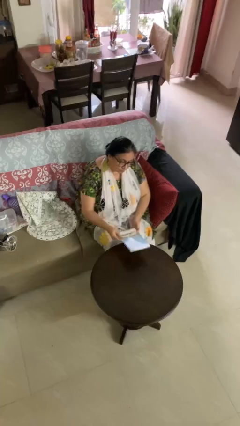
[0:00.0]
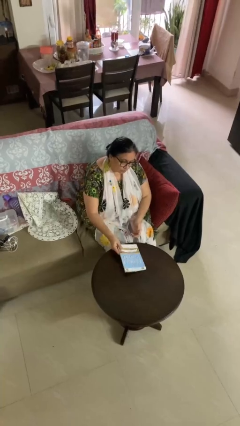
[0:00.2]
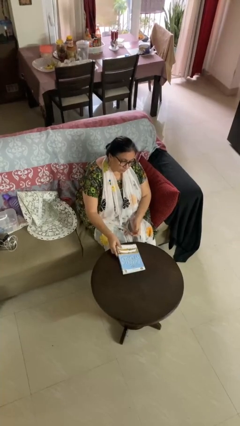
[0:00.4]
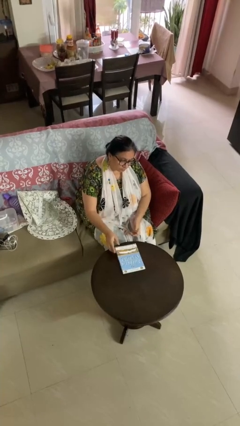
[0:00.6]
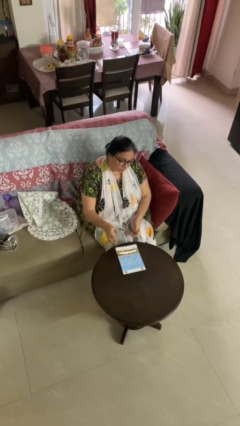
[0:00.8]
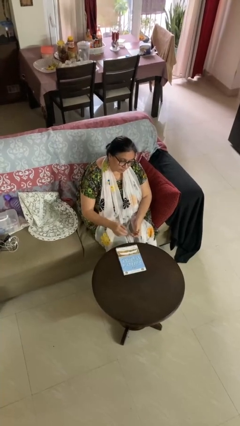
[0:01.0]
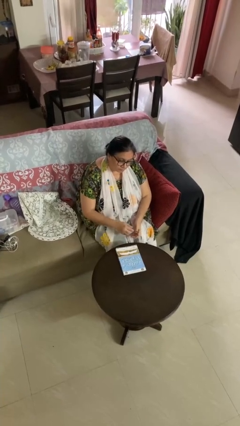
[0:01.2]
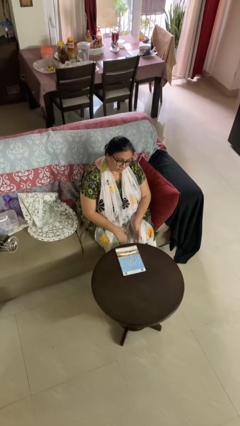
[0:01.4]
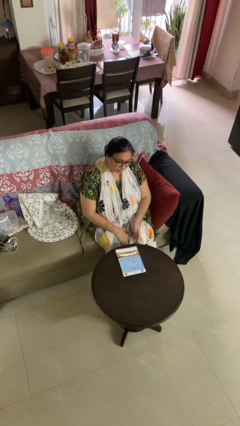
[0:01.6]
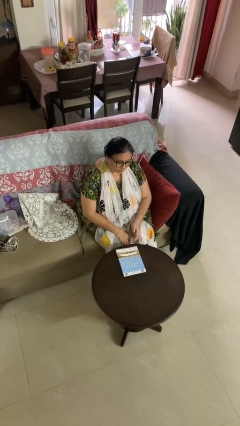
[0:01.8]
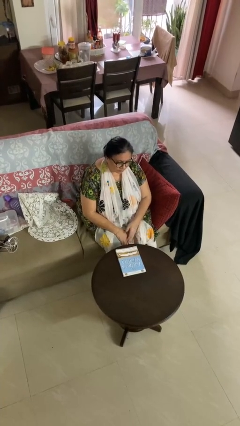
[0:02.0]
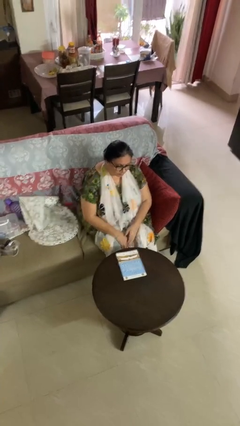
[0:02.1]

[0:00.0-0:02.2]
person puts down object on table

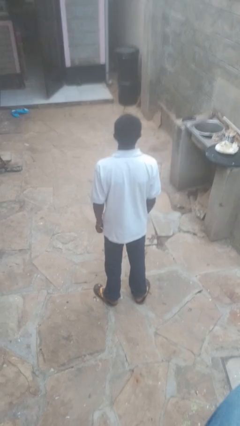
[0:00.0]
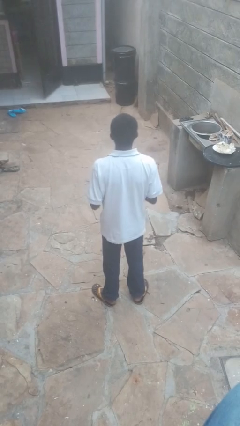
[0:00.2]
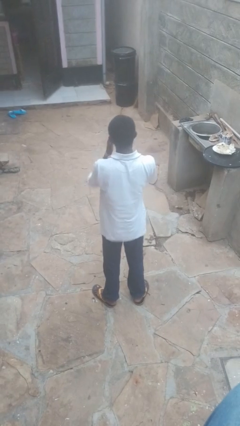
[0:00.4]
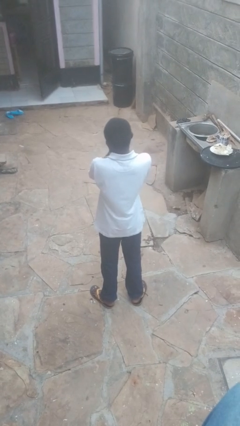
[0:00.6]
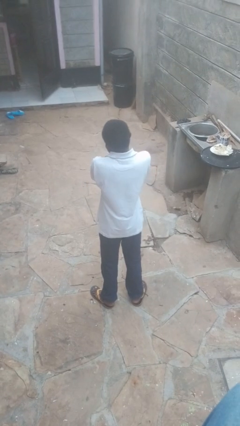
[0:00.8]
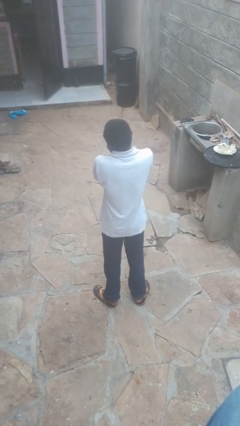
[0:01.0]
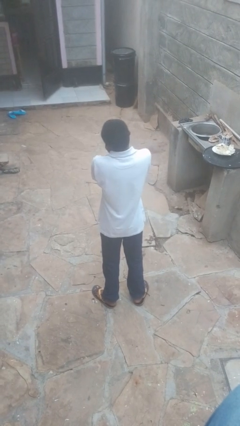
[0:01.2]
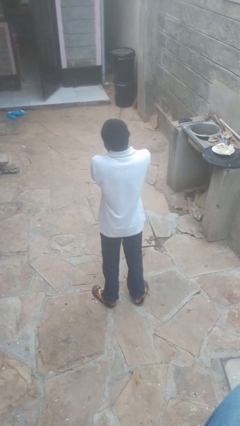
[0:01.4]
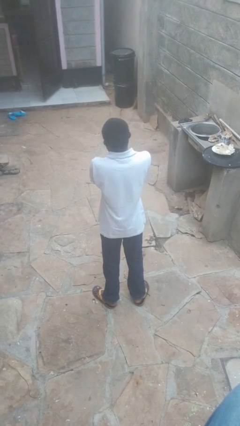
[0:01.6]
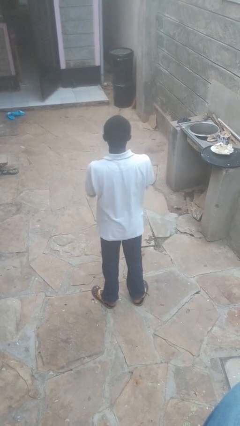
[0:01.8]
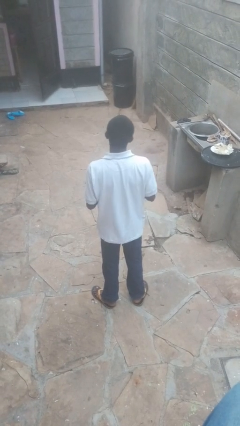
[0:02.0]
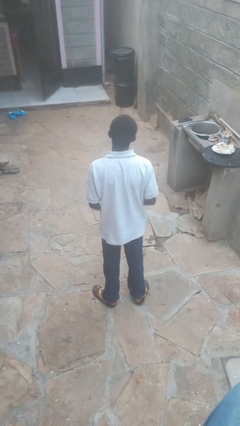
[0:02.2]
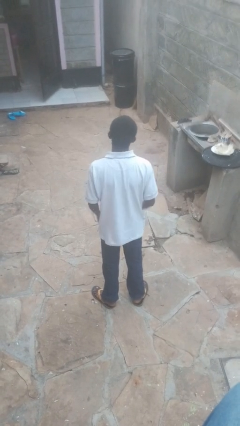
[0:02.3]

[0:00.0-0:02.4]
person covers face with hands

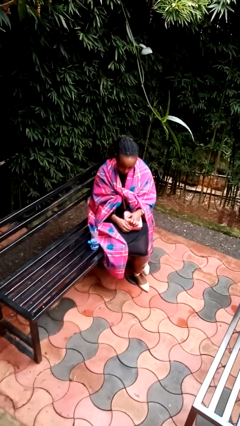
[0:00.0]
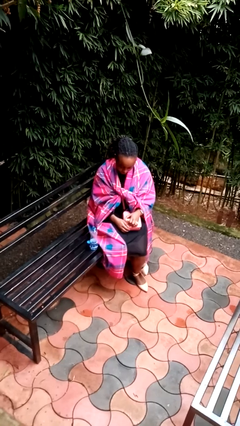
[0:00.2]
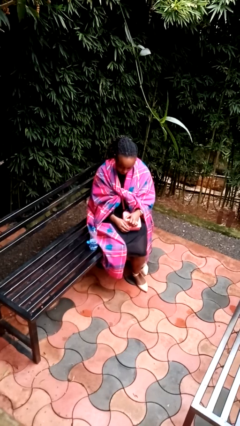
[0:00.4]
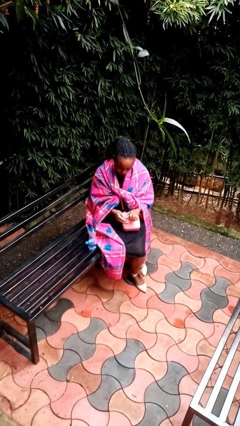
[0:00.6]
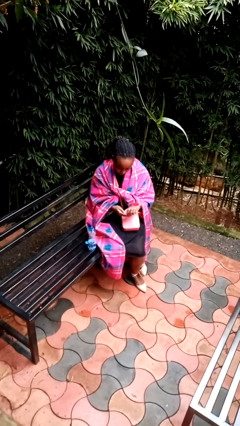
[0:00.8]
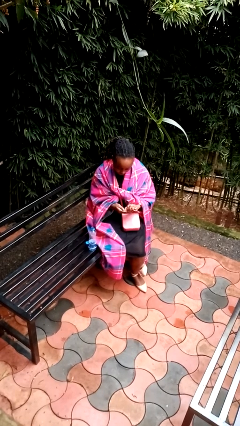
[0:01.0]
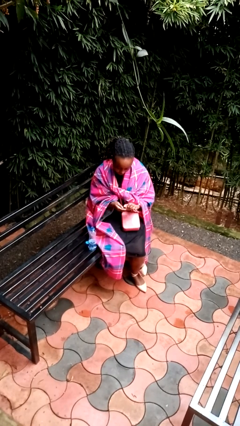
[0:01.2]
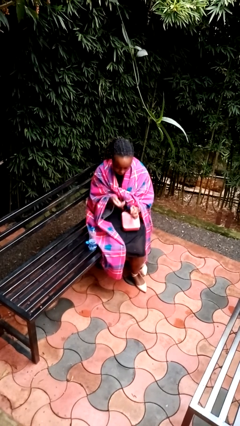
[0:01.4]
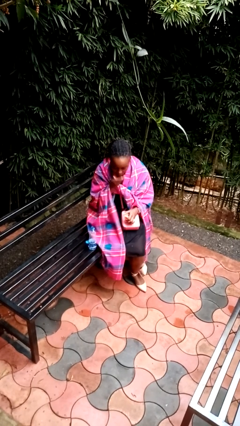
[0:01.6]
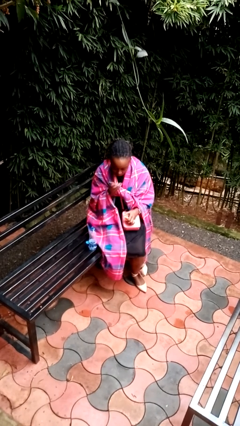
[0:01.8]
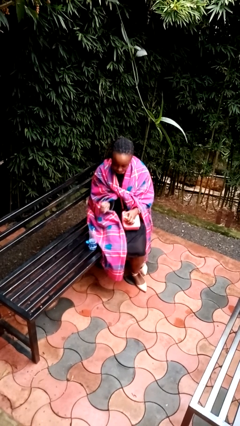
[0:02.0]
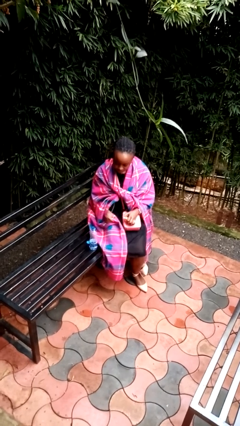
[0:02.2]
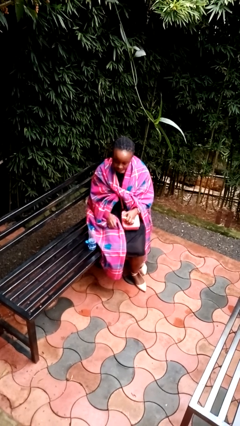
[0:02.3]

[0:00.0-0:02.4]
person takes medicine pills

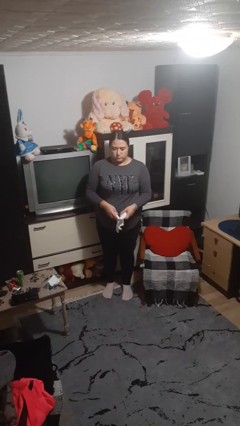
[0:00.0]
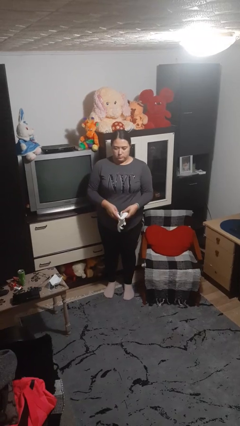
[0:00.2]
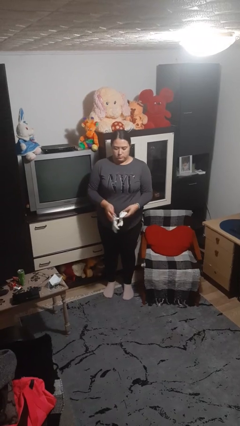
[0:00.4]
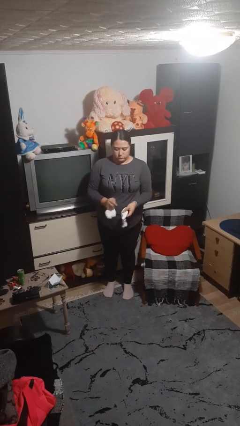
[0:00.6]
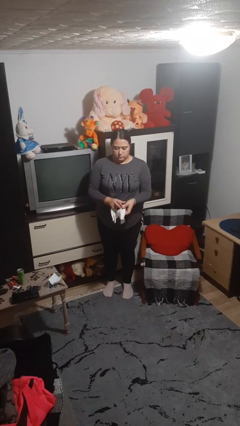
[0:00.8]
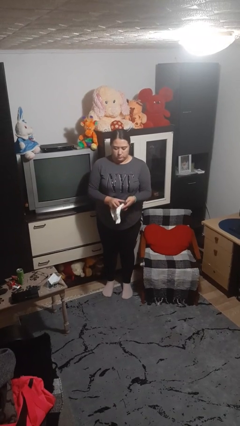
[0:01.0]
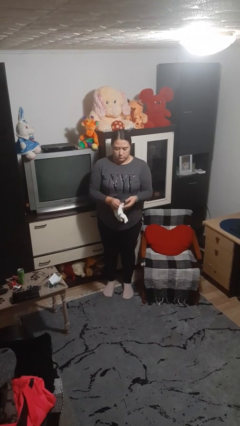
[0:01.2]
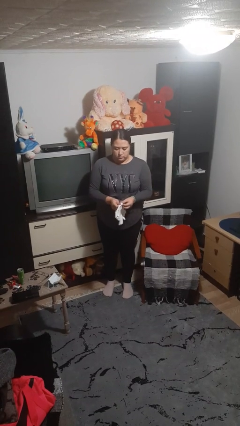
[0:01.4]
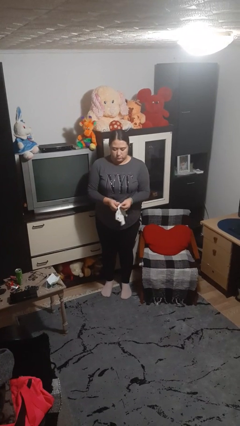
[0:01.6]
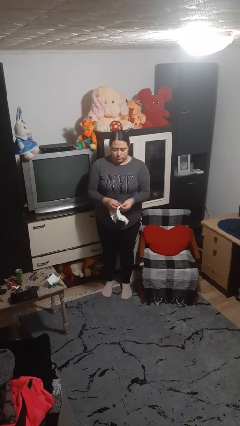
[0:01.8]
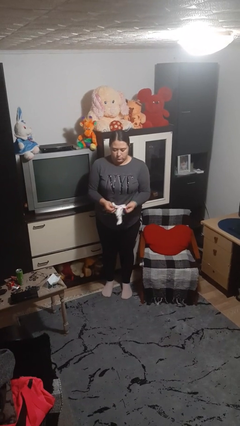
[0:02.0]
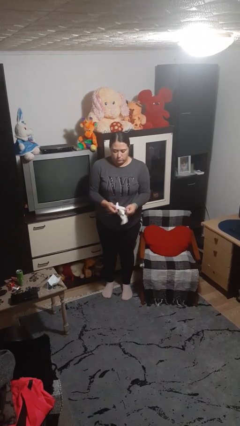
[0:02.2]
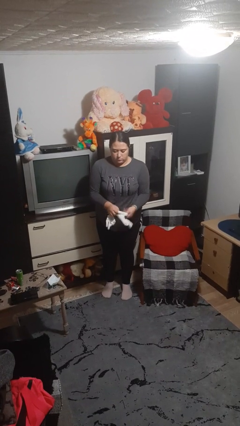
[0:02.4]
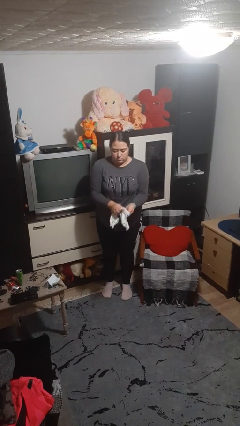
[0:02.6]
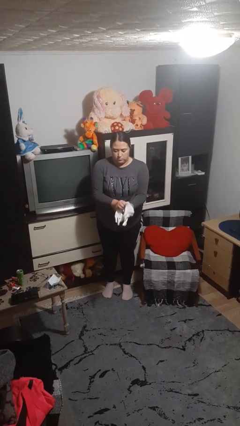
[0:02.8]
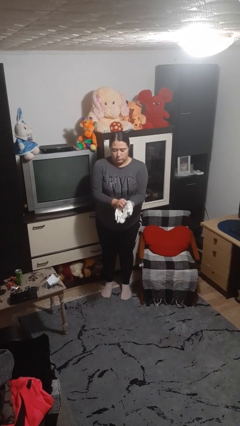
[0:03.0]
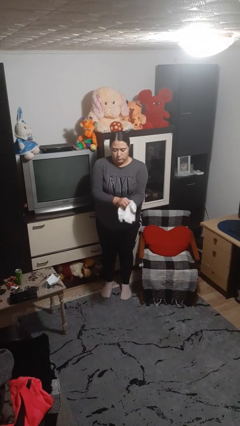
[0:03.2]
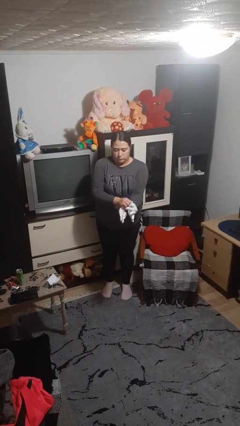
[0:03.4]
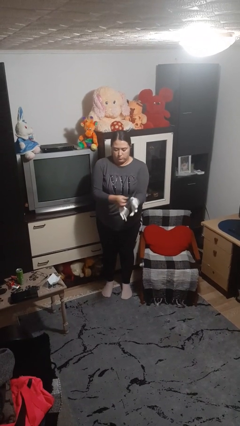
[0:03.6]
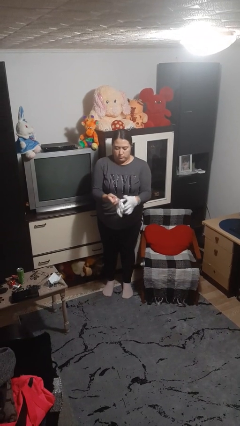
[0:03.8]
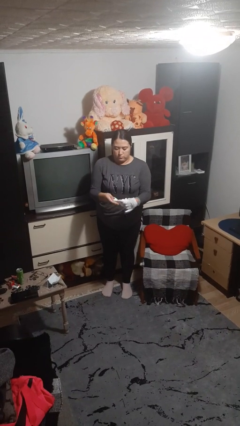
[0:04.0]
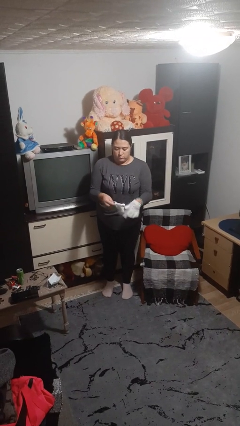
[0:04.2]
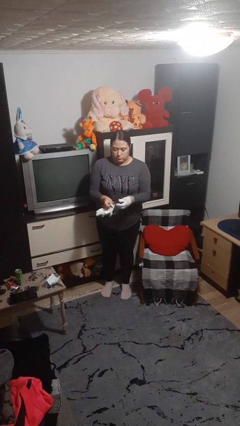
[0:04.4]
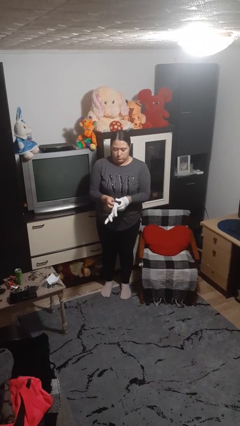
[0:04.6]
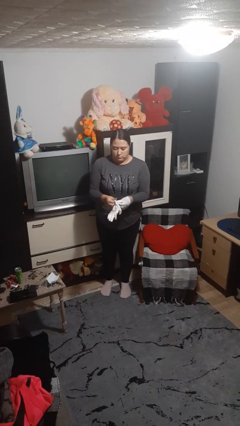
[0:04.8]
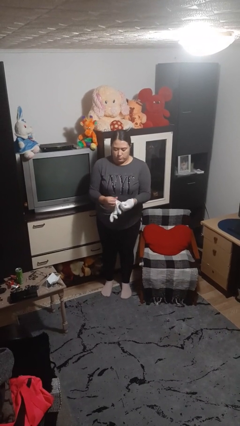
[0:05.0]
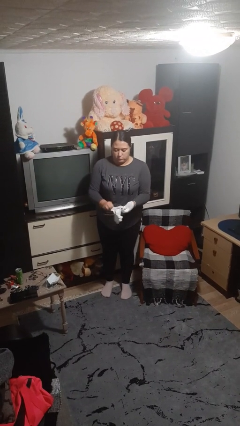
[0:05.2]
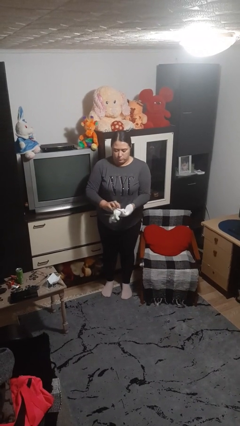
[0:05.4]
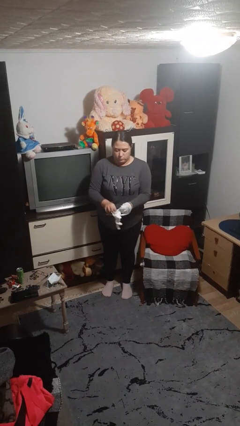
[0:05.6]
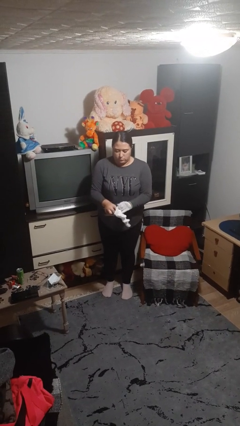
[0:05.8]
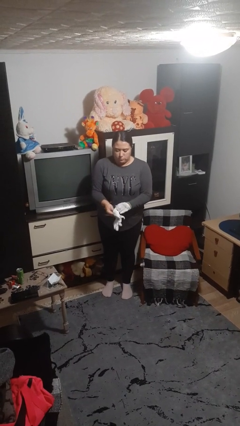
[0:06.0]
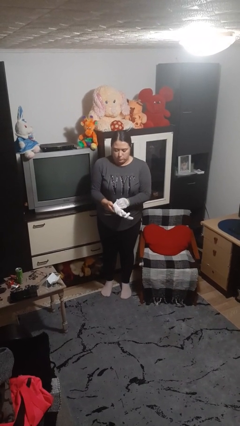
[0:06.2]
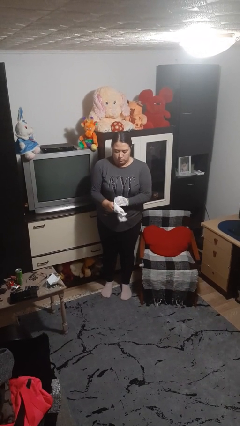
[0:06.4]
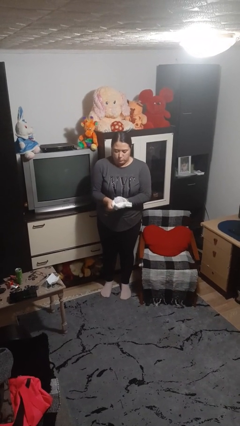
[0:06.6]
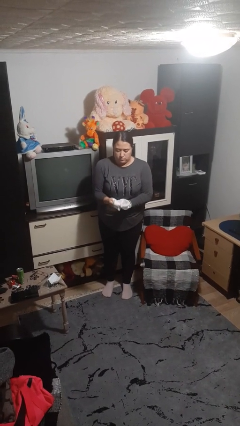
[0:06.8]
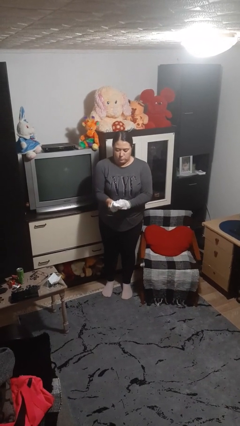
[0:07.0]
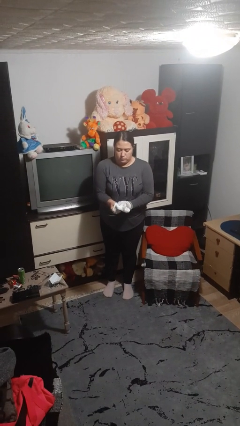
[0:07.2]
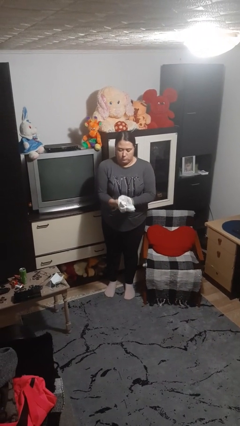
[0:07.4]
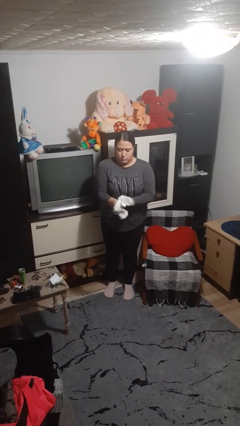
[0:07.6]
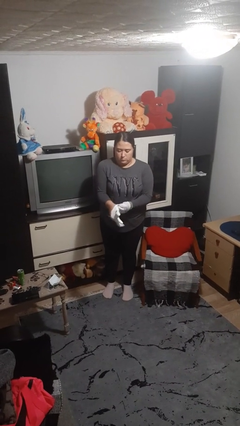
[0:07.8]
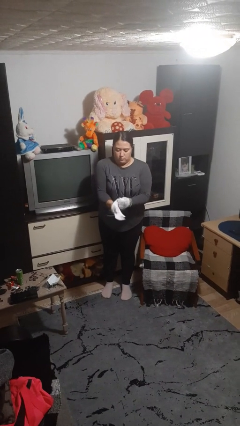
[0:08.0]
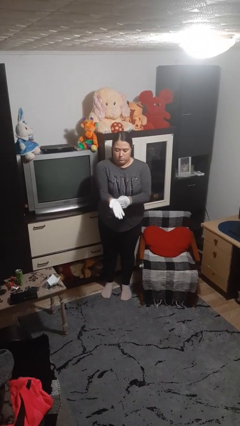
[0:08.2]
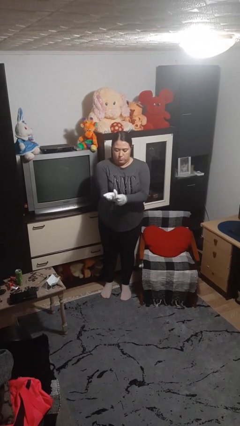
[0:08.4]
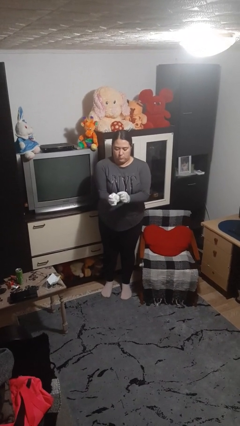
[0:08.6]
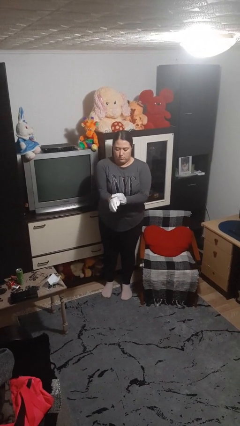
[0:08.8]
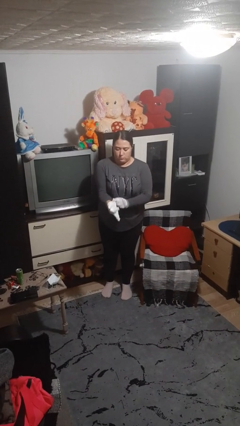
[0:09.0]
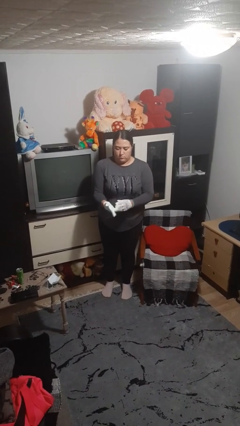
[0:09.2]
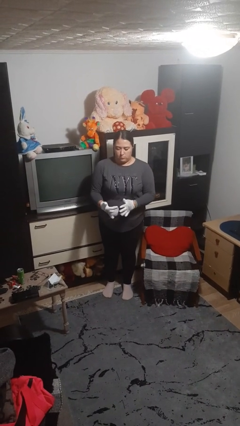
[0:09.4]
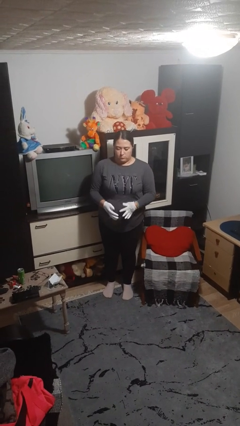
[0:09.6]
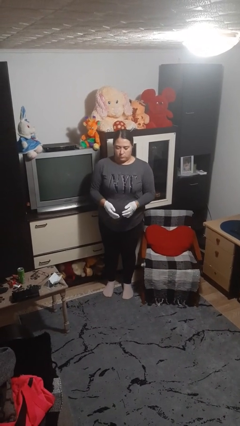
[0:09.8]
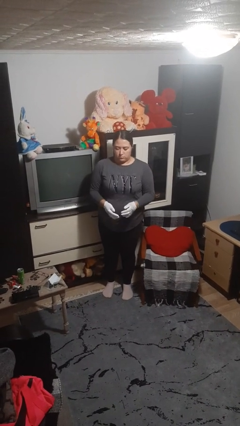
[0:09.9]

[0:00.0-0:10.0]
person puts on gloves

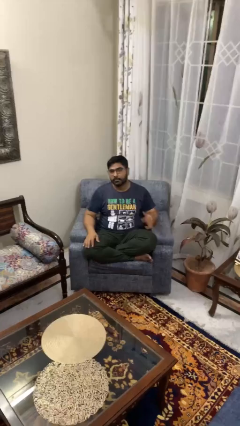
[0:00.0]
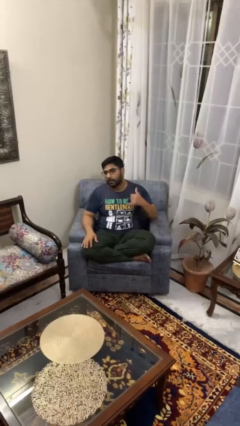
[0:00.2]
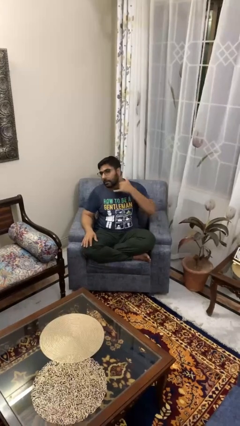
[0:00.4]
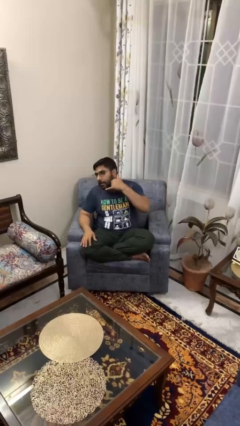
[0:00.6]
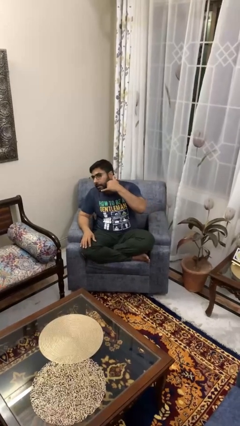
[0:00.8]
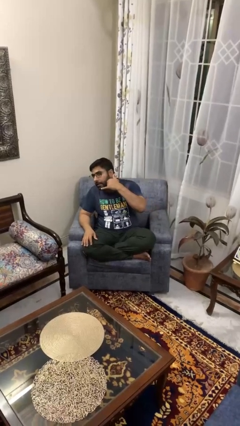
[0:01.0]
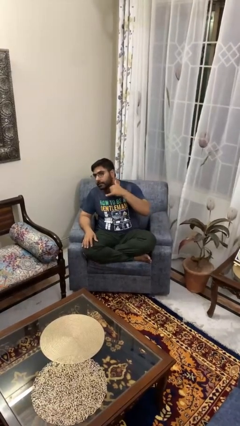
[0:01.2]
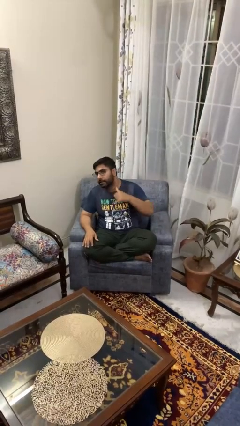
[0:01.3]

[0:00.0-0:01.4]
person gestures call me
